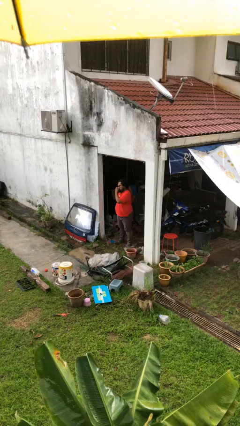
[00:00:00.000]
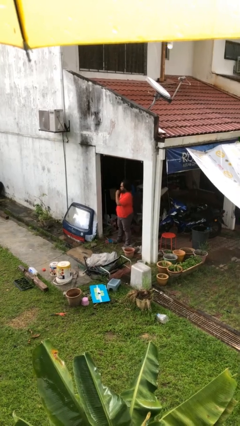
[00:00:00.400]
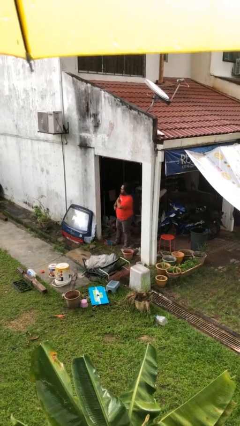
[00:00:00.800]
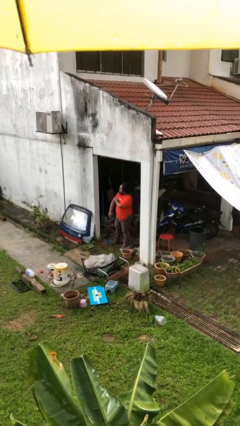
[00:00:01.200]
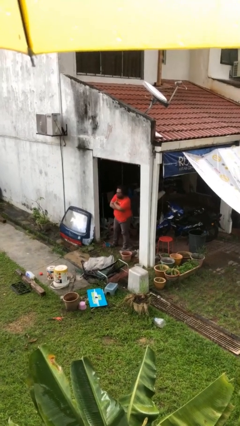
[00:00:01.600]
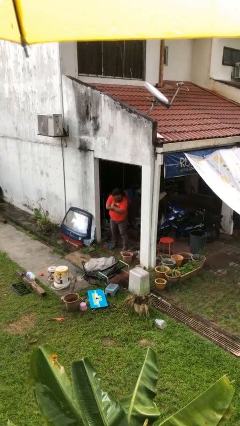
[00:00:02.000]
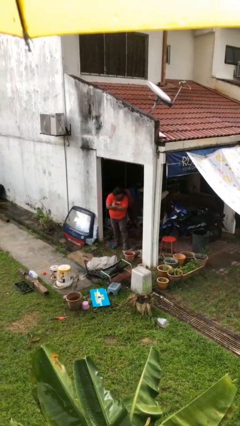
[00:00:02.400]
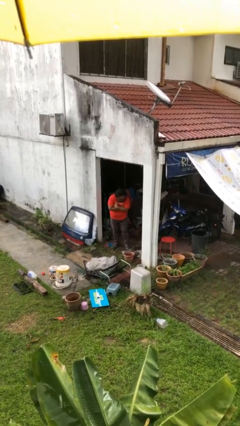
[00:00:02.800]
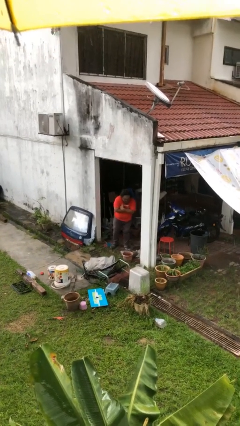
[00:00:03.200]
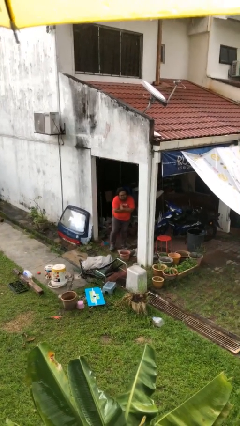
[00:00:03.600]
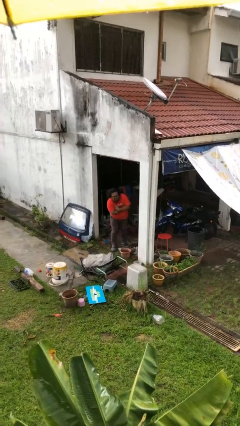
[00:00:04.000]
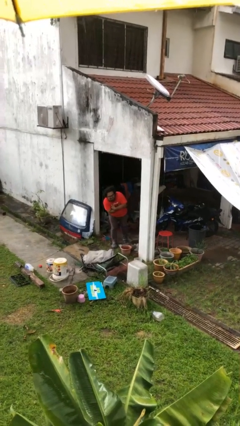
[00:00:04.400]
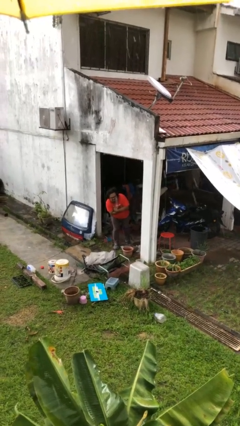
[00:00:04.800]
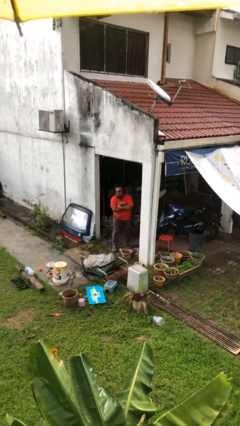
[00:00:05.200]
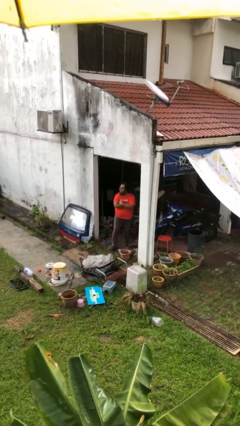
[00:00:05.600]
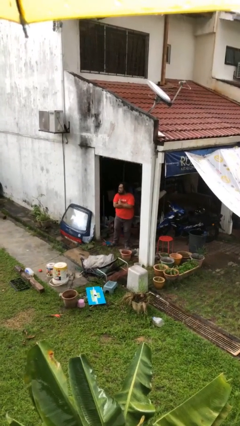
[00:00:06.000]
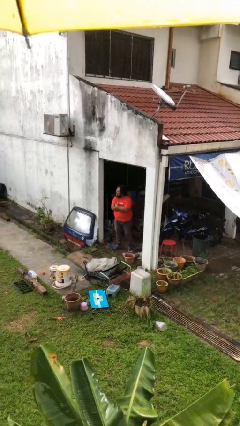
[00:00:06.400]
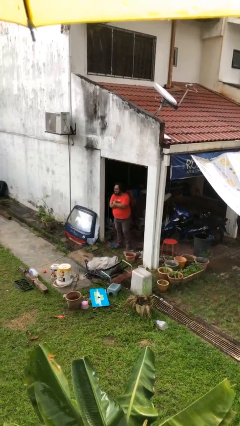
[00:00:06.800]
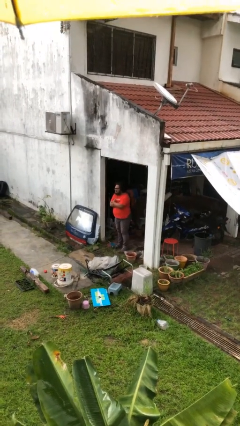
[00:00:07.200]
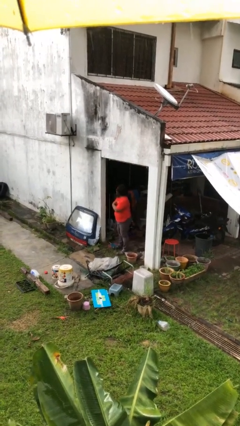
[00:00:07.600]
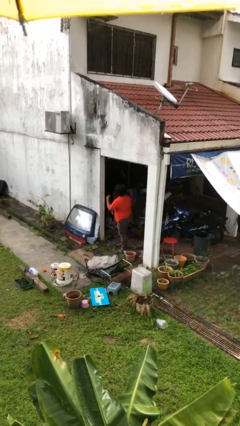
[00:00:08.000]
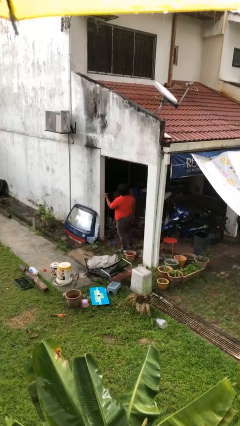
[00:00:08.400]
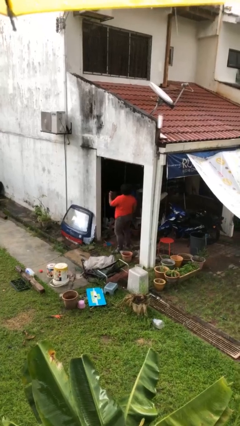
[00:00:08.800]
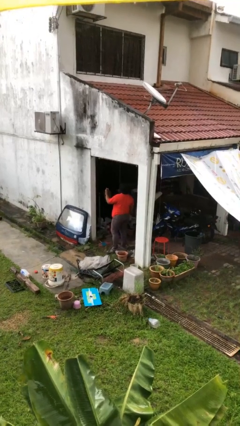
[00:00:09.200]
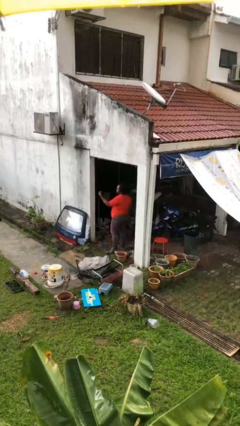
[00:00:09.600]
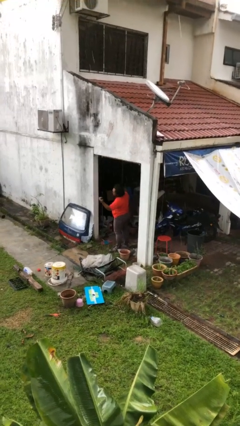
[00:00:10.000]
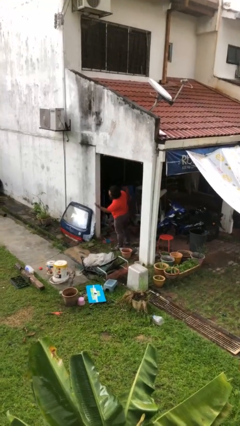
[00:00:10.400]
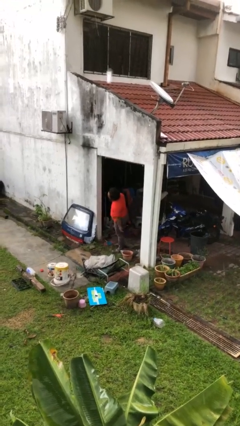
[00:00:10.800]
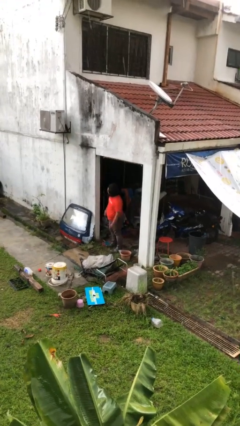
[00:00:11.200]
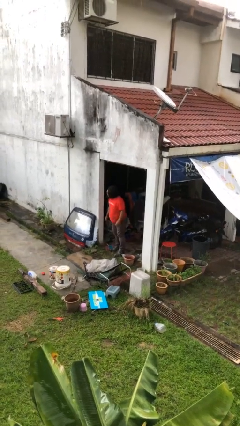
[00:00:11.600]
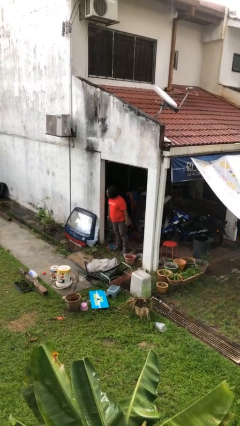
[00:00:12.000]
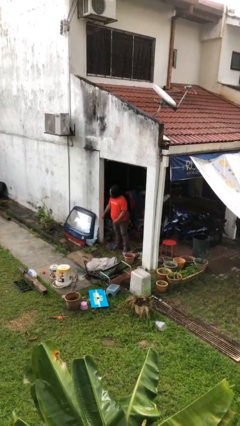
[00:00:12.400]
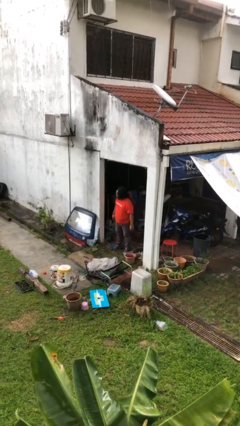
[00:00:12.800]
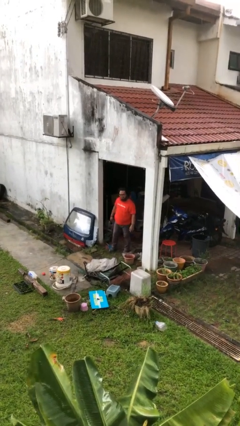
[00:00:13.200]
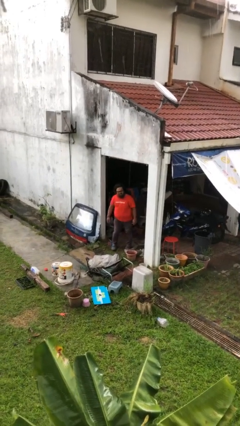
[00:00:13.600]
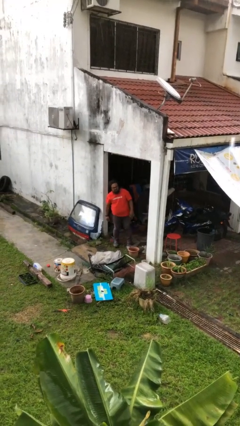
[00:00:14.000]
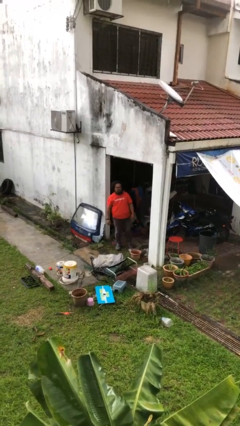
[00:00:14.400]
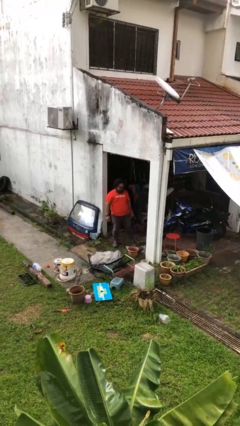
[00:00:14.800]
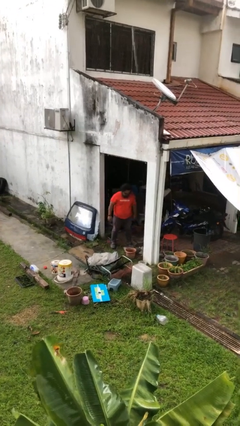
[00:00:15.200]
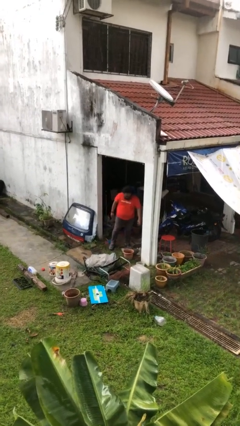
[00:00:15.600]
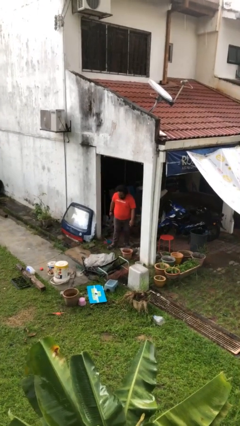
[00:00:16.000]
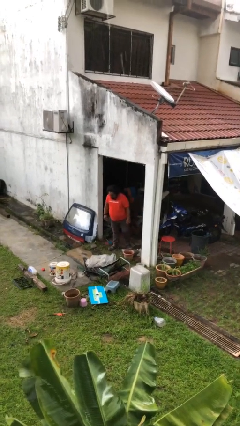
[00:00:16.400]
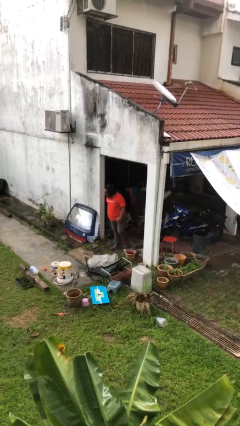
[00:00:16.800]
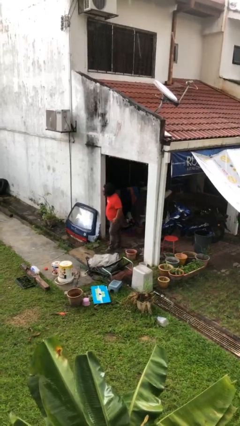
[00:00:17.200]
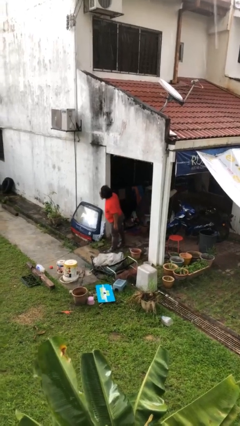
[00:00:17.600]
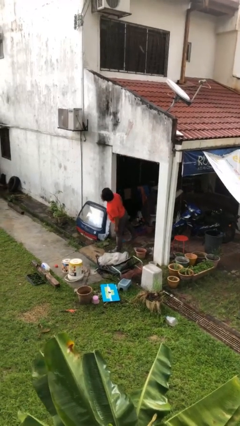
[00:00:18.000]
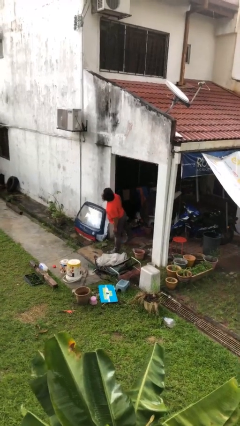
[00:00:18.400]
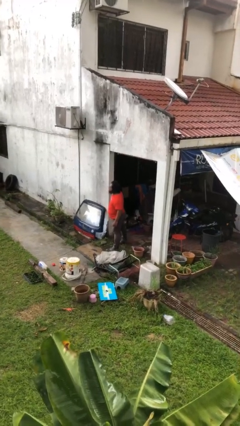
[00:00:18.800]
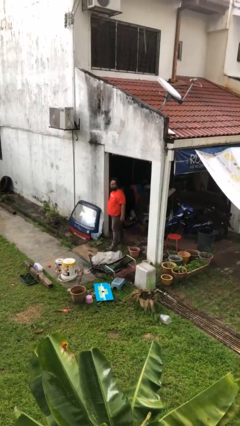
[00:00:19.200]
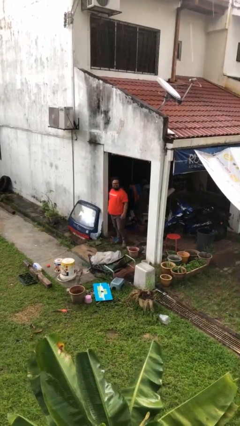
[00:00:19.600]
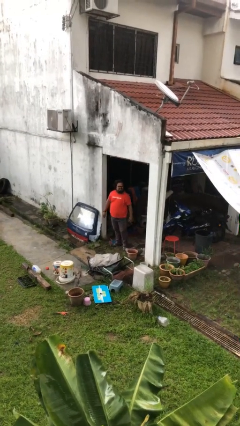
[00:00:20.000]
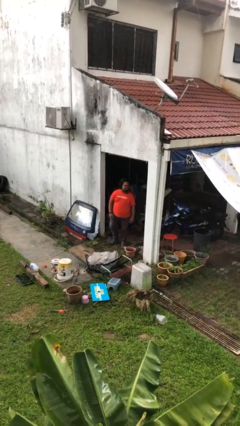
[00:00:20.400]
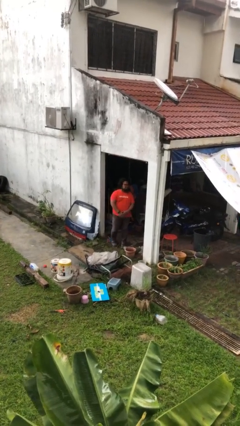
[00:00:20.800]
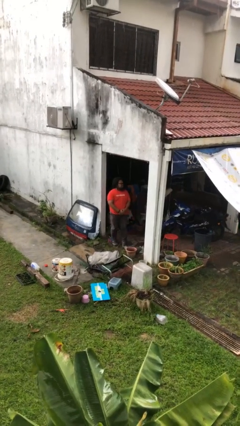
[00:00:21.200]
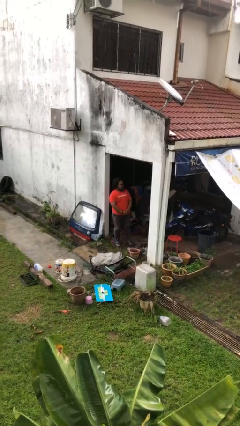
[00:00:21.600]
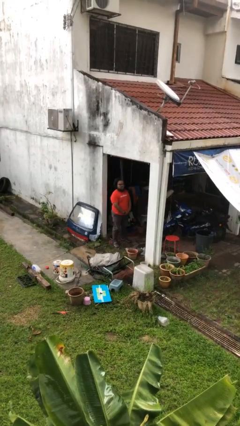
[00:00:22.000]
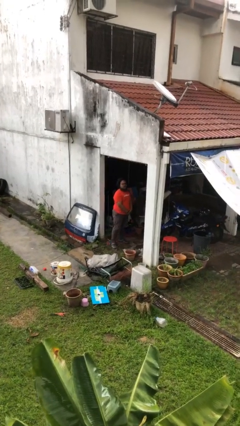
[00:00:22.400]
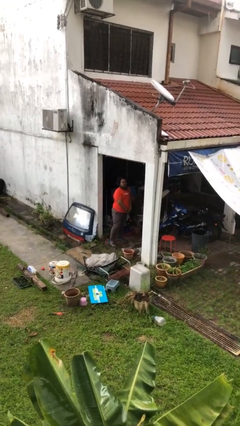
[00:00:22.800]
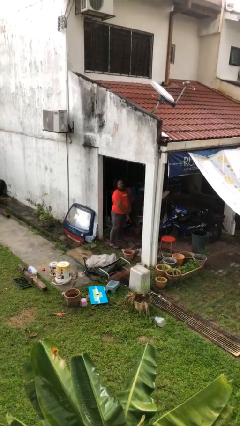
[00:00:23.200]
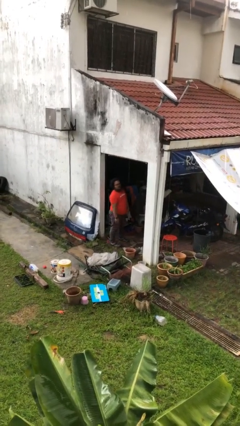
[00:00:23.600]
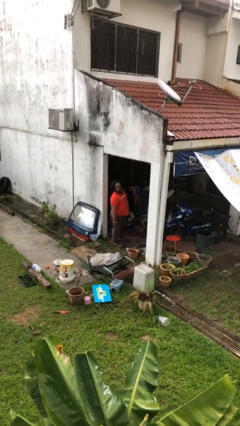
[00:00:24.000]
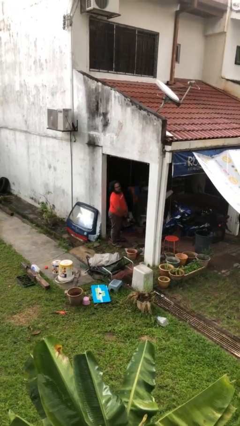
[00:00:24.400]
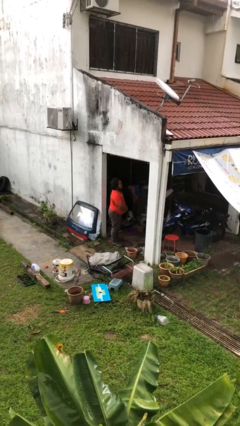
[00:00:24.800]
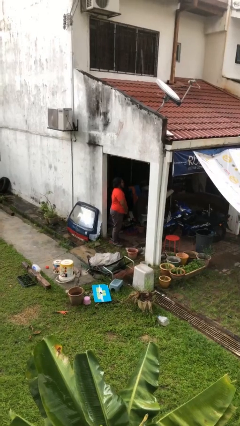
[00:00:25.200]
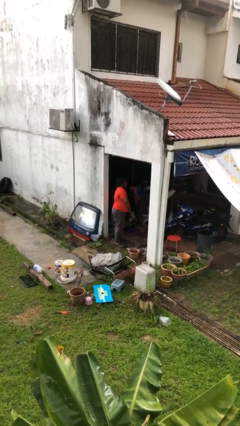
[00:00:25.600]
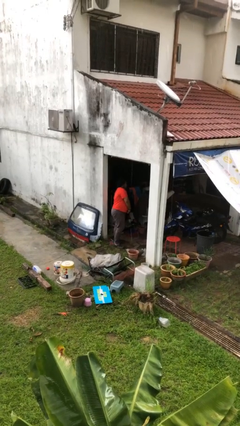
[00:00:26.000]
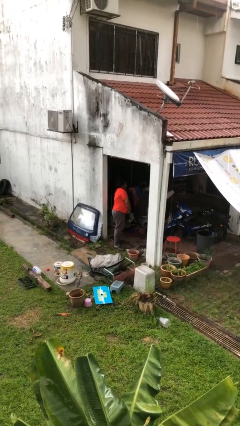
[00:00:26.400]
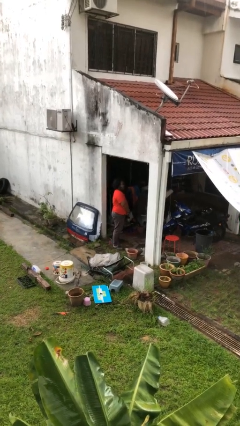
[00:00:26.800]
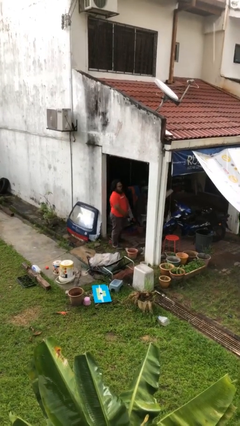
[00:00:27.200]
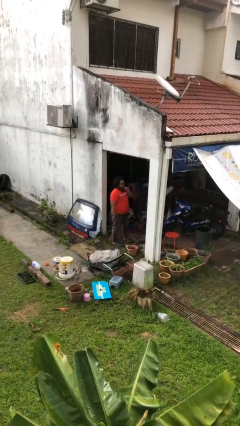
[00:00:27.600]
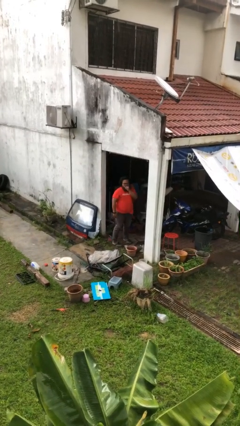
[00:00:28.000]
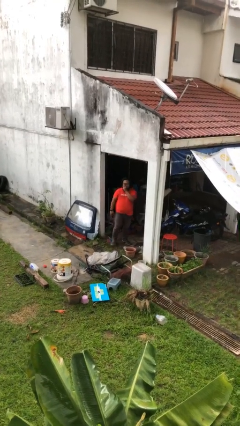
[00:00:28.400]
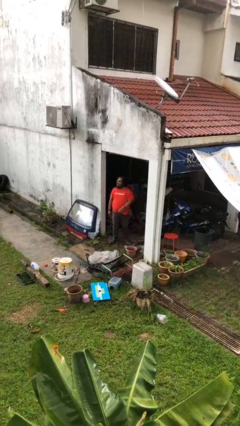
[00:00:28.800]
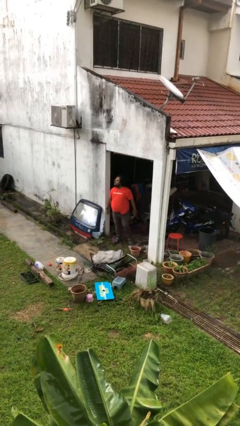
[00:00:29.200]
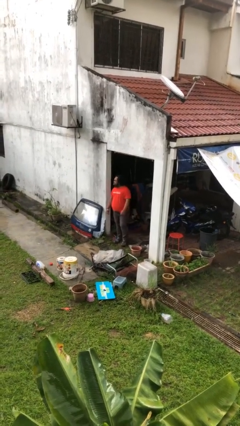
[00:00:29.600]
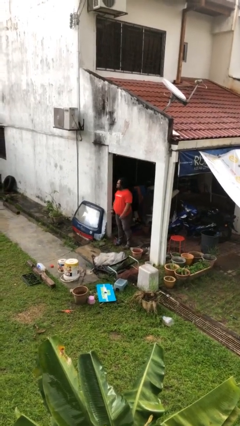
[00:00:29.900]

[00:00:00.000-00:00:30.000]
person walks

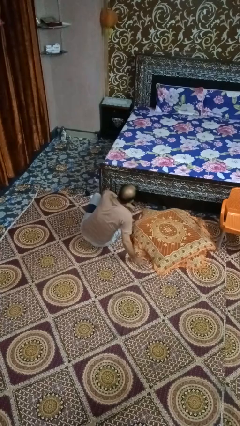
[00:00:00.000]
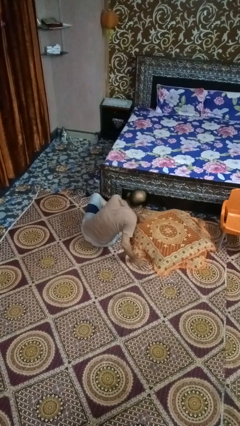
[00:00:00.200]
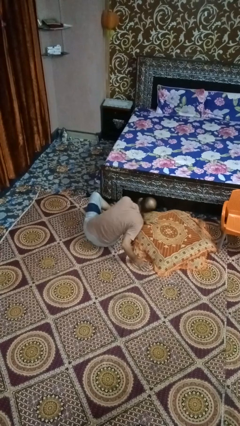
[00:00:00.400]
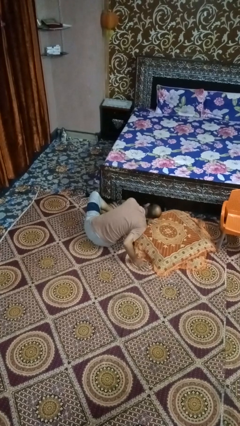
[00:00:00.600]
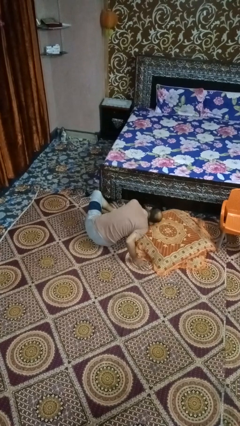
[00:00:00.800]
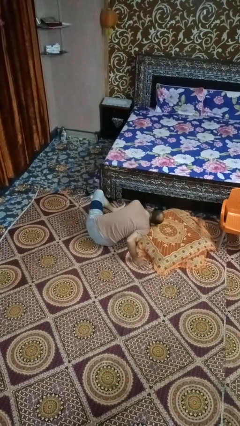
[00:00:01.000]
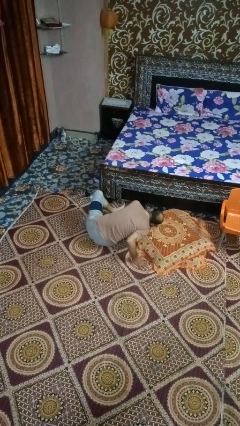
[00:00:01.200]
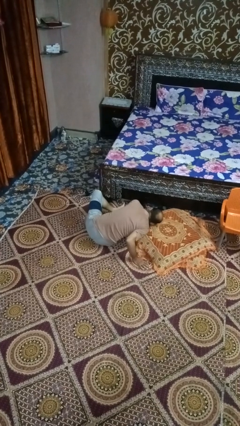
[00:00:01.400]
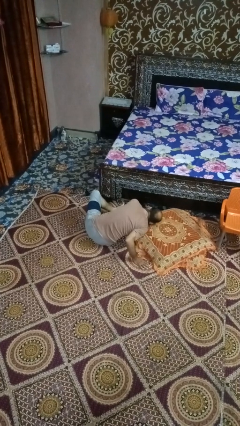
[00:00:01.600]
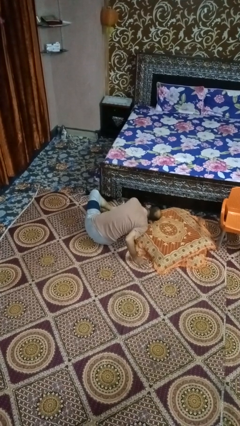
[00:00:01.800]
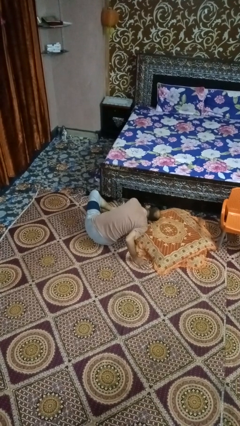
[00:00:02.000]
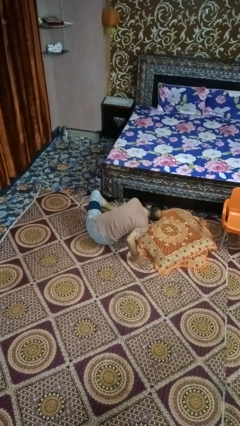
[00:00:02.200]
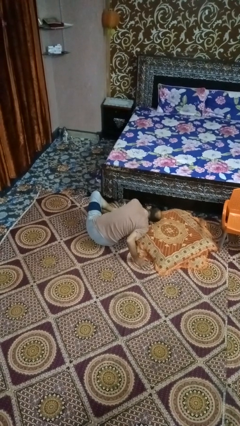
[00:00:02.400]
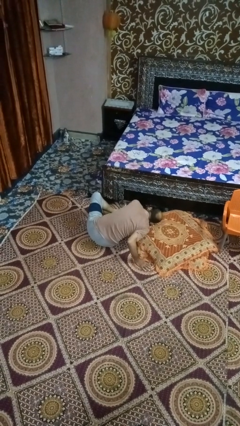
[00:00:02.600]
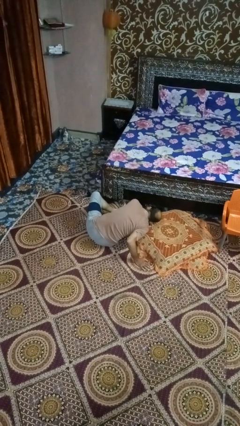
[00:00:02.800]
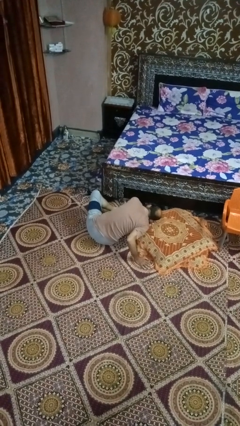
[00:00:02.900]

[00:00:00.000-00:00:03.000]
person searches under bed

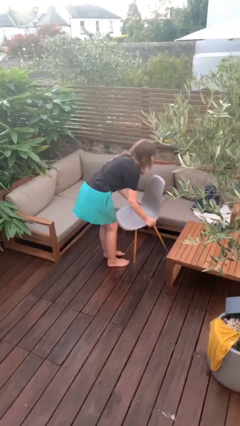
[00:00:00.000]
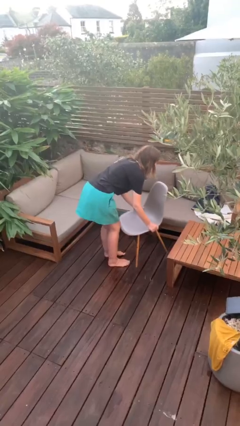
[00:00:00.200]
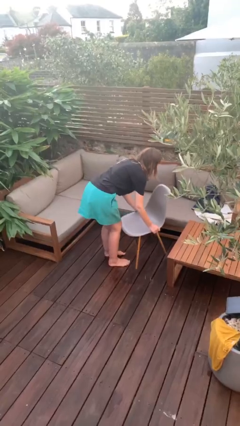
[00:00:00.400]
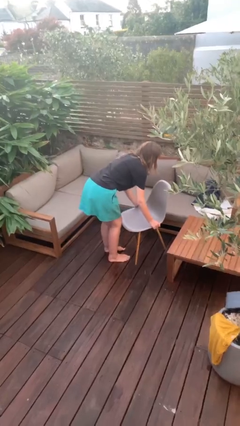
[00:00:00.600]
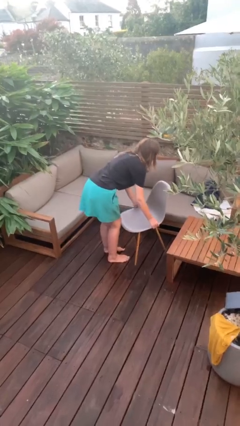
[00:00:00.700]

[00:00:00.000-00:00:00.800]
person puts down object on floor
